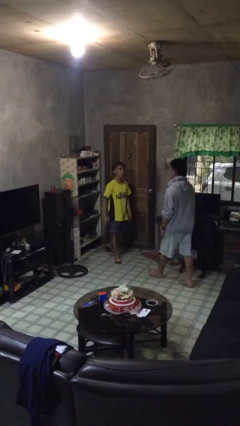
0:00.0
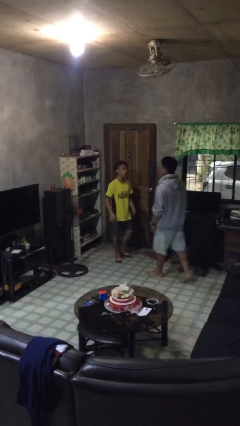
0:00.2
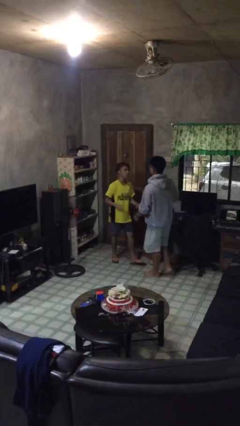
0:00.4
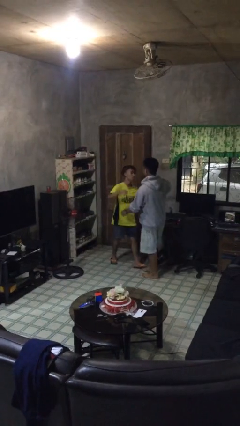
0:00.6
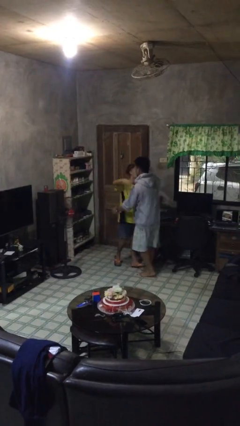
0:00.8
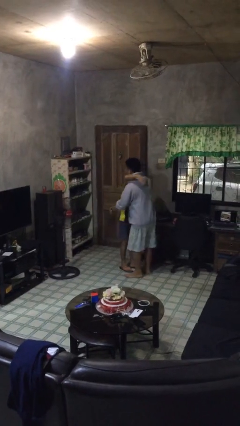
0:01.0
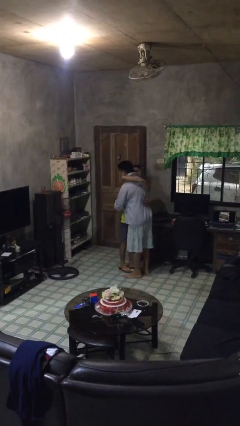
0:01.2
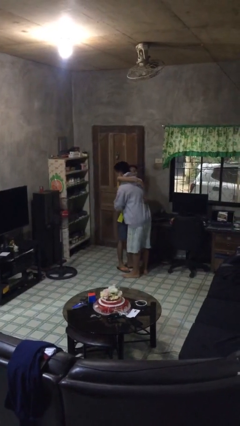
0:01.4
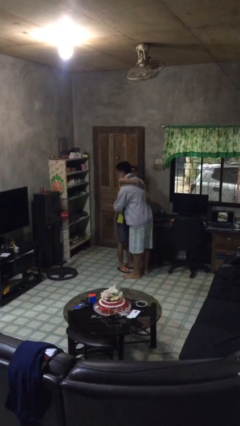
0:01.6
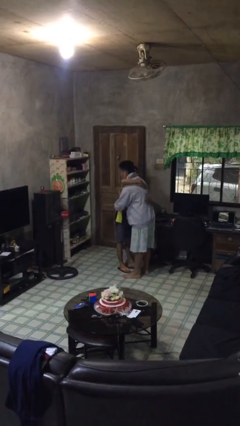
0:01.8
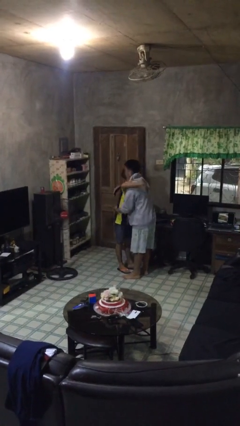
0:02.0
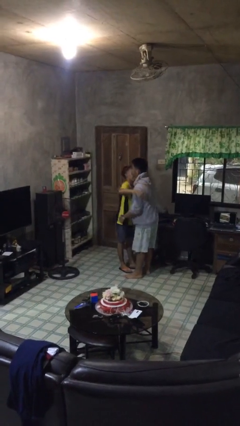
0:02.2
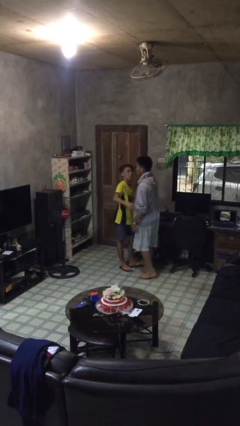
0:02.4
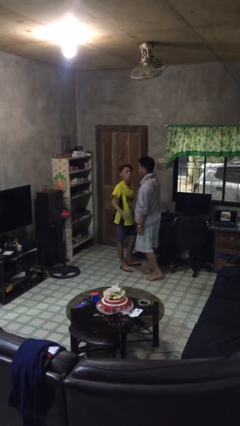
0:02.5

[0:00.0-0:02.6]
person embraces person

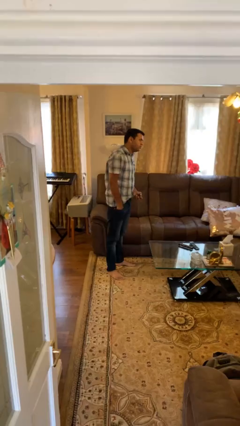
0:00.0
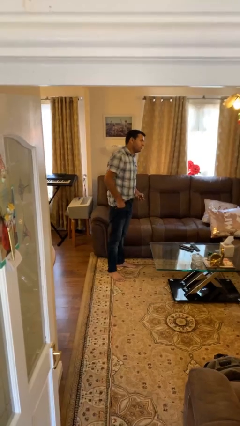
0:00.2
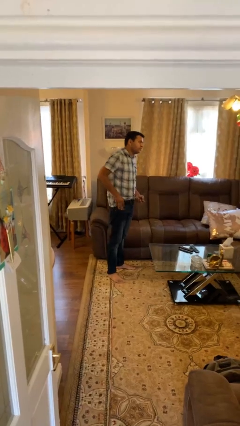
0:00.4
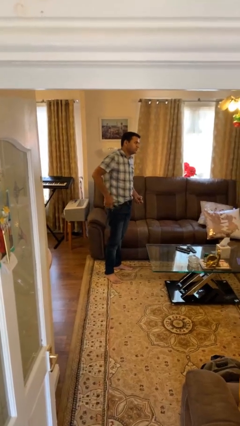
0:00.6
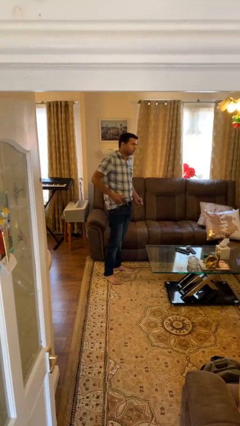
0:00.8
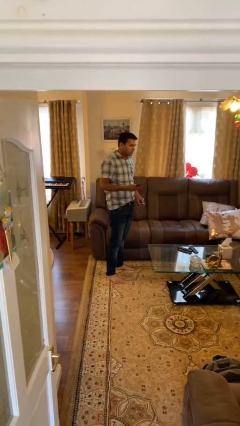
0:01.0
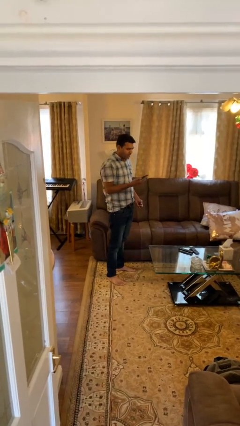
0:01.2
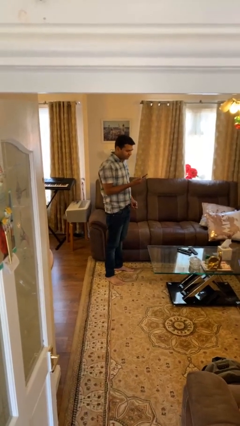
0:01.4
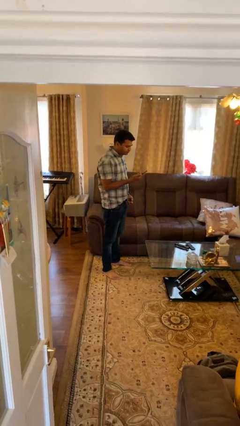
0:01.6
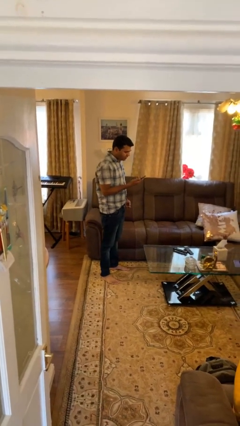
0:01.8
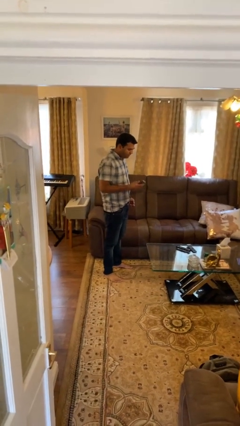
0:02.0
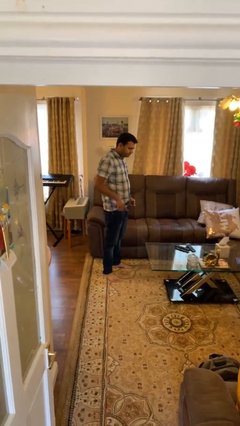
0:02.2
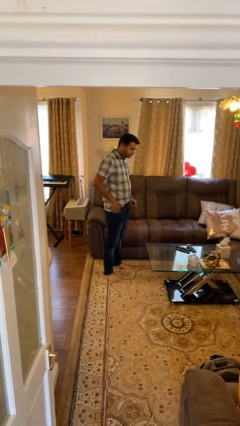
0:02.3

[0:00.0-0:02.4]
person takes phone from pocket

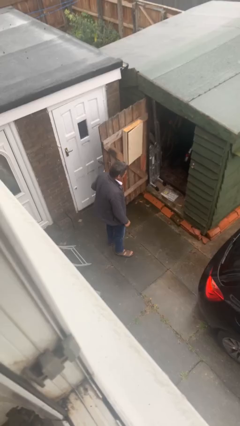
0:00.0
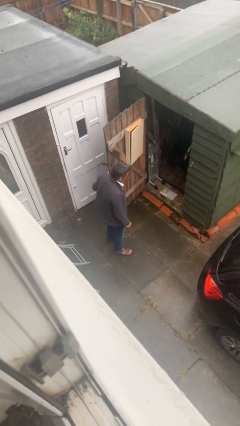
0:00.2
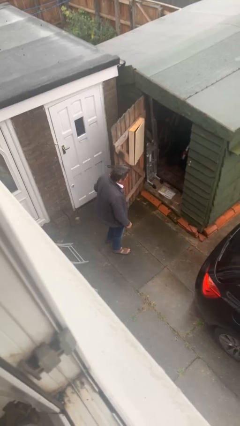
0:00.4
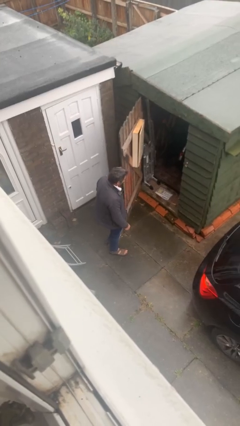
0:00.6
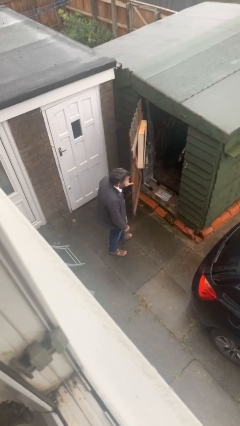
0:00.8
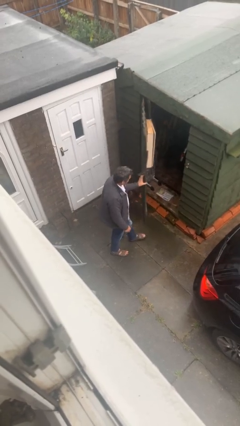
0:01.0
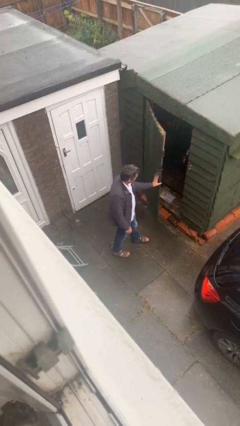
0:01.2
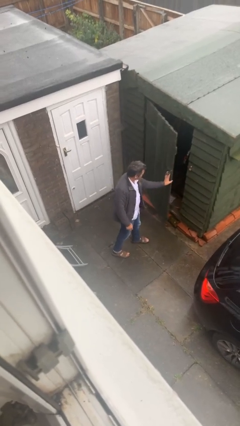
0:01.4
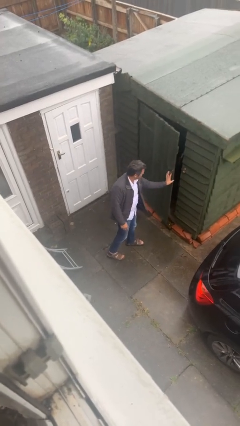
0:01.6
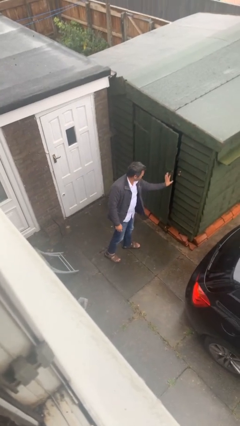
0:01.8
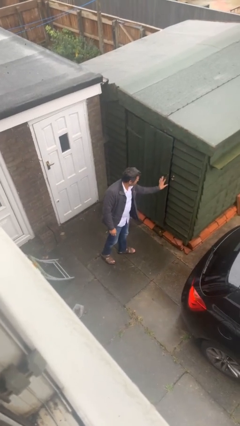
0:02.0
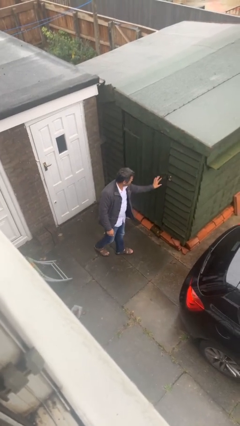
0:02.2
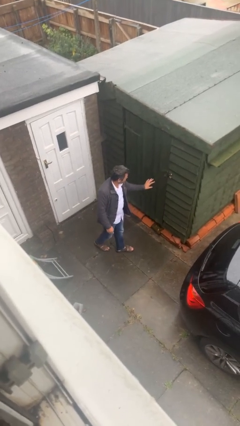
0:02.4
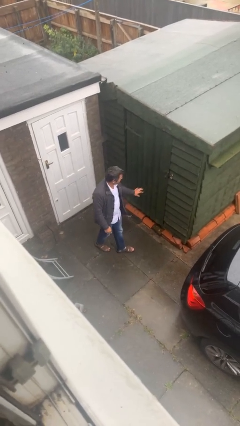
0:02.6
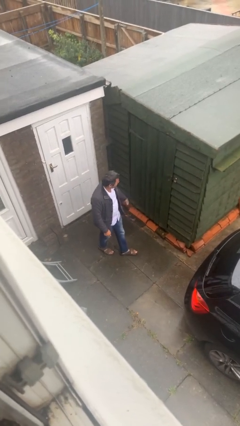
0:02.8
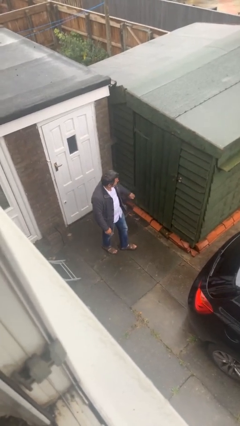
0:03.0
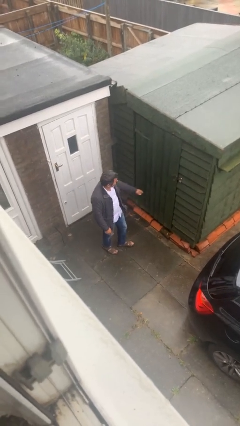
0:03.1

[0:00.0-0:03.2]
person closes facility door

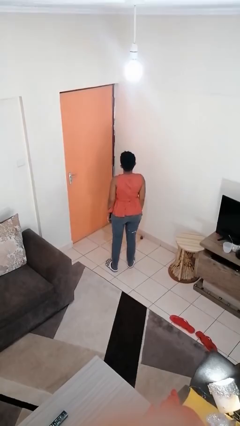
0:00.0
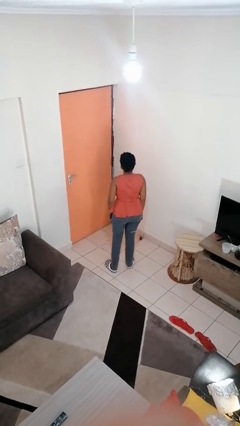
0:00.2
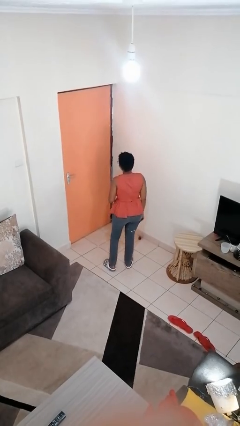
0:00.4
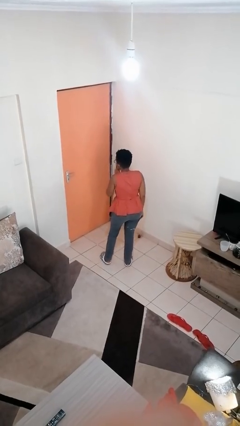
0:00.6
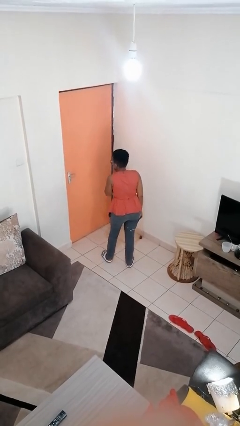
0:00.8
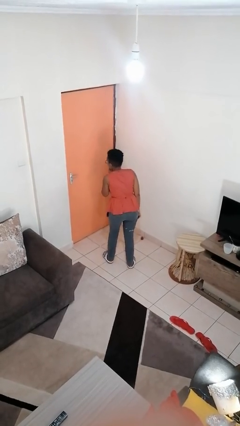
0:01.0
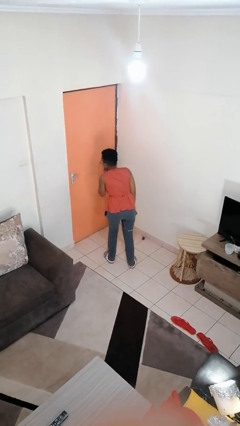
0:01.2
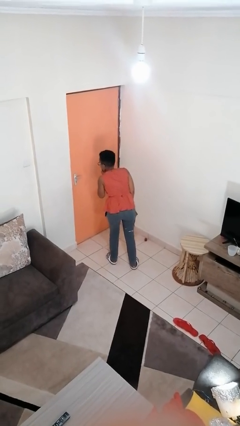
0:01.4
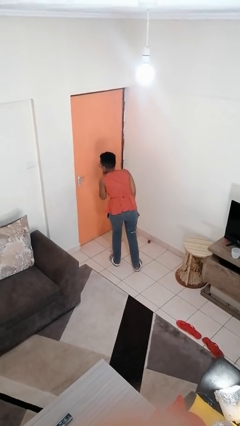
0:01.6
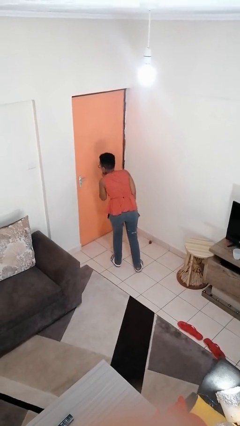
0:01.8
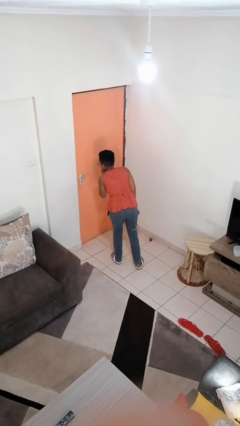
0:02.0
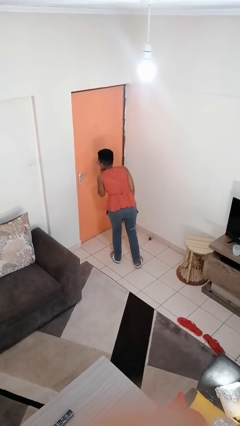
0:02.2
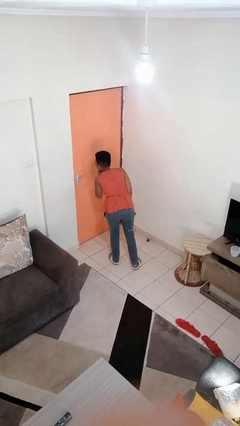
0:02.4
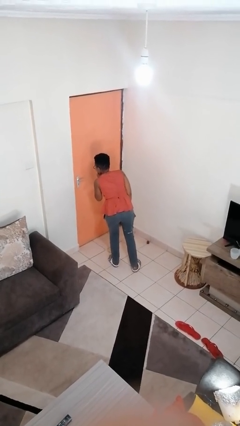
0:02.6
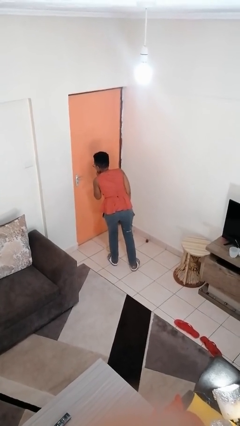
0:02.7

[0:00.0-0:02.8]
person gestures be quiet

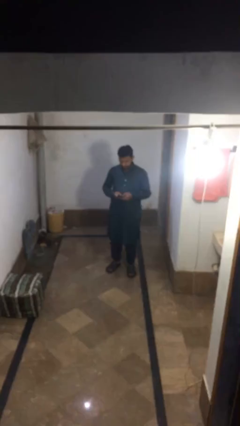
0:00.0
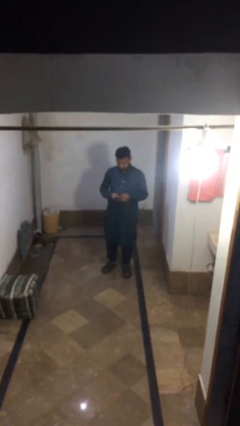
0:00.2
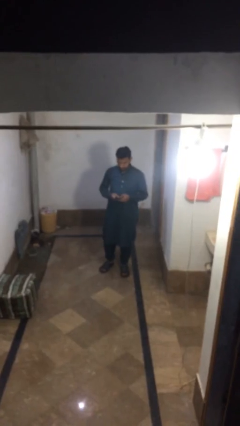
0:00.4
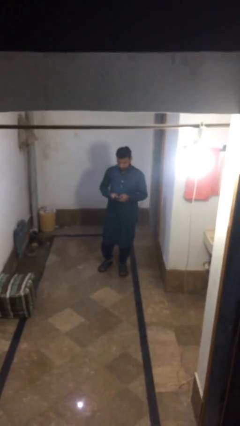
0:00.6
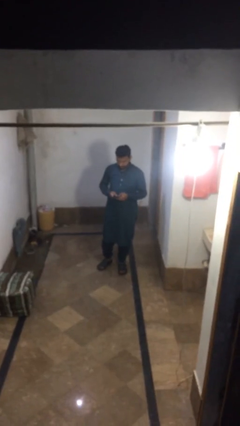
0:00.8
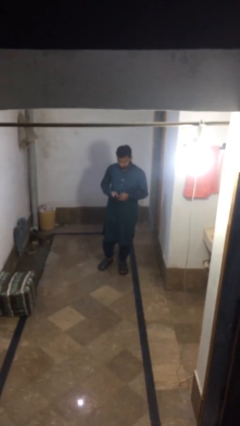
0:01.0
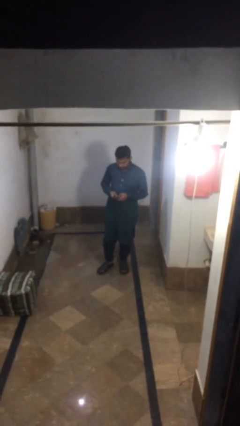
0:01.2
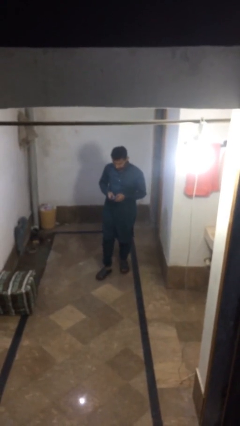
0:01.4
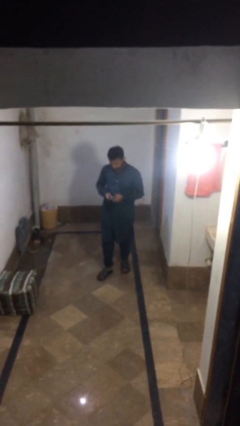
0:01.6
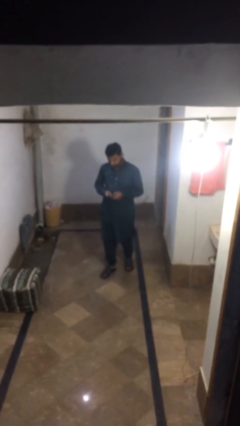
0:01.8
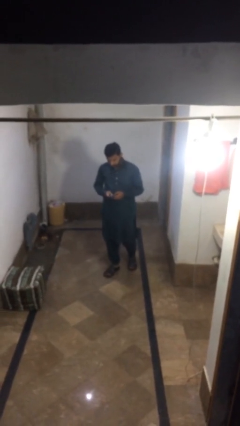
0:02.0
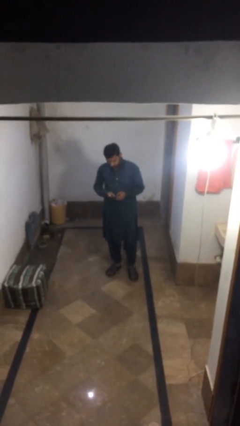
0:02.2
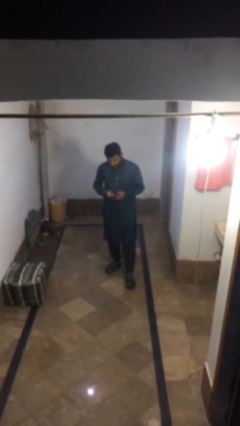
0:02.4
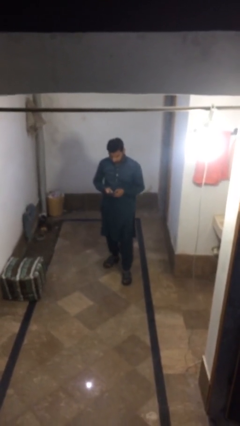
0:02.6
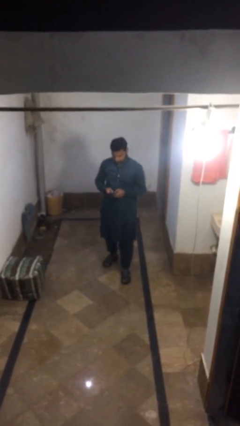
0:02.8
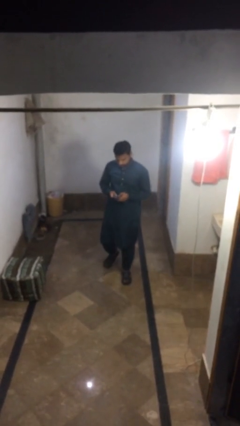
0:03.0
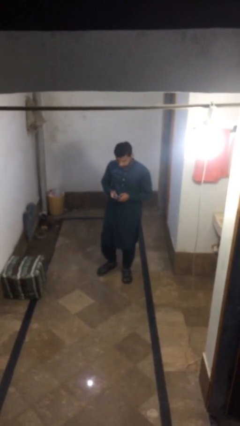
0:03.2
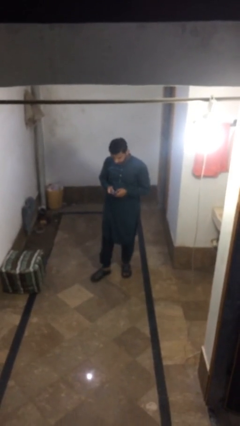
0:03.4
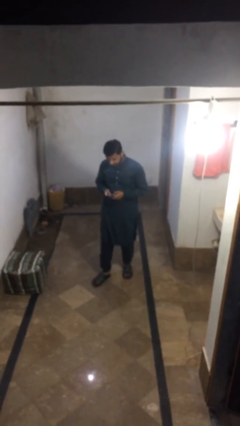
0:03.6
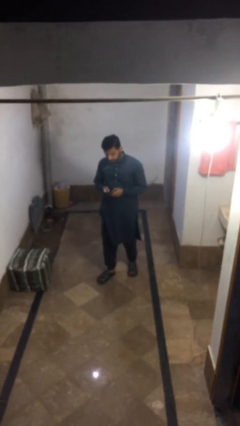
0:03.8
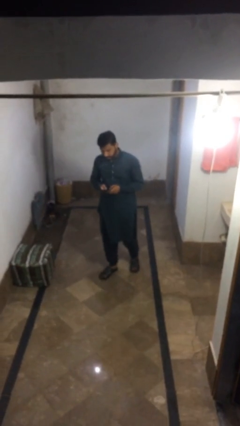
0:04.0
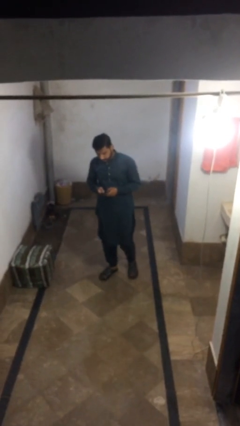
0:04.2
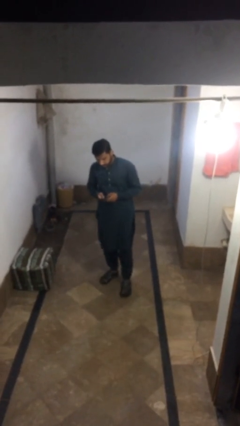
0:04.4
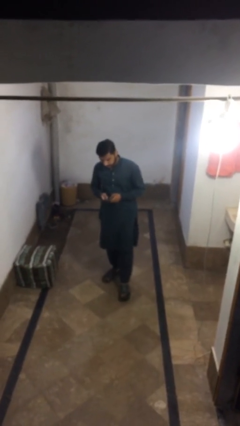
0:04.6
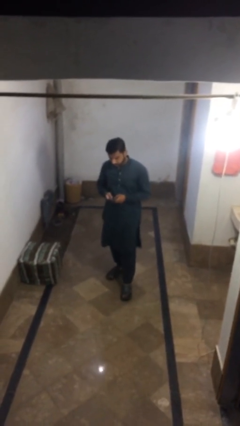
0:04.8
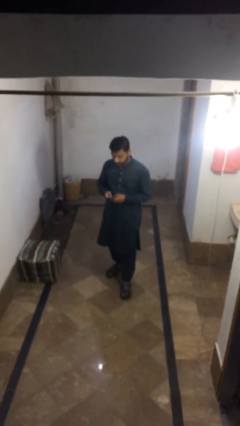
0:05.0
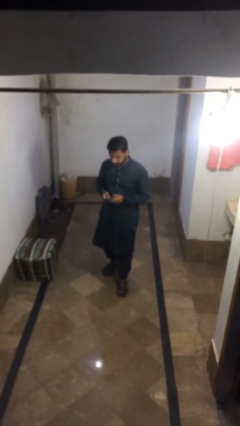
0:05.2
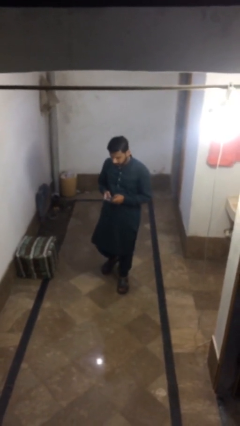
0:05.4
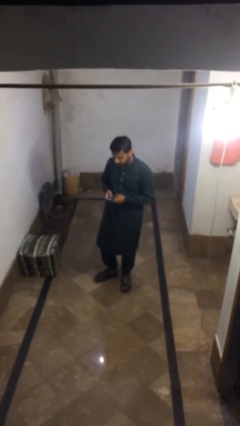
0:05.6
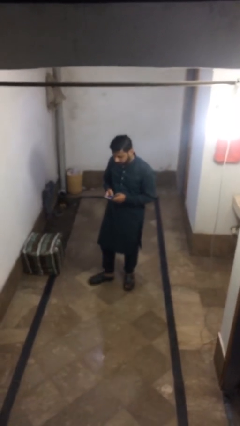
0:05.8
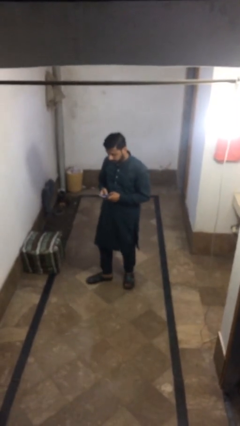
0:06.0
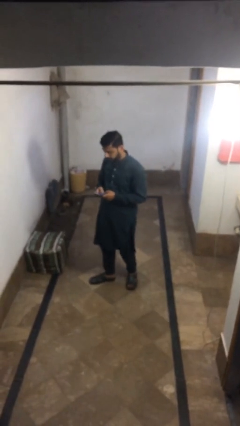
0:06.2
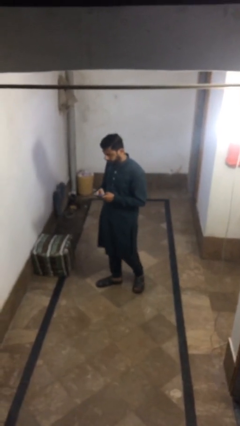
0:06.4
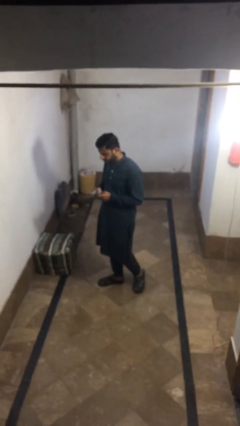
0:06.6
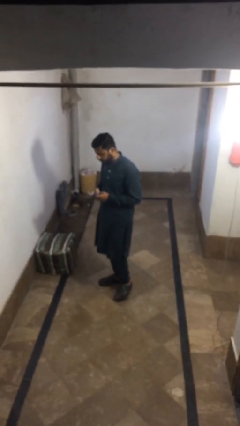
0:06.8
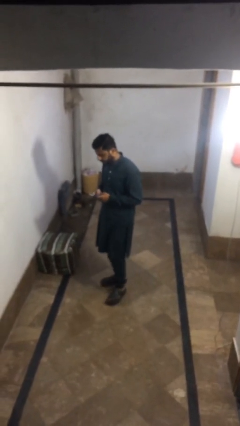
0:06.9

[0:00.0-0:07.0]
person texts on phone
